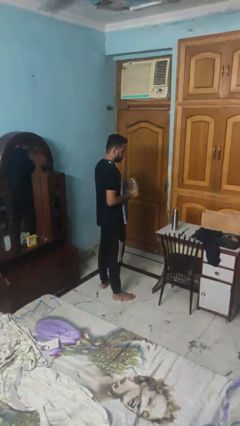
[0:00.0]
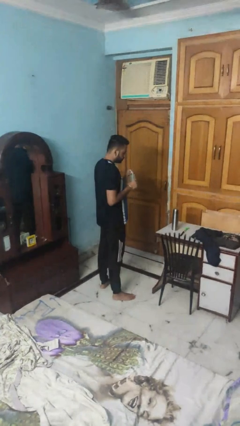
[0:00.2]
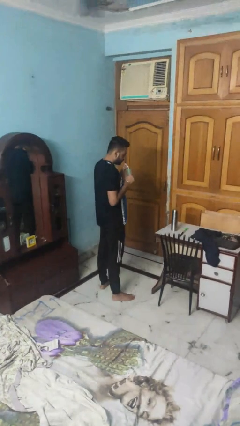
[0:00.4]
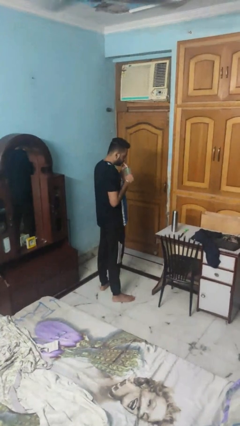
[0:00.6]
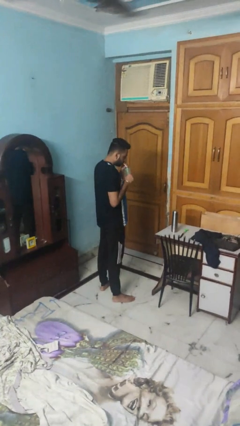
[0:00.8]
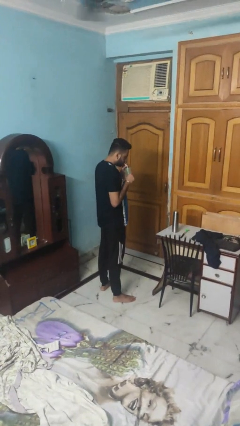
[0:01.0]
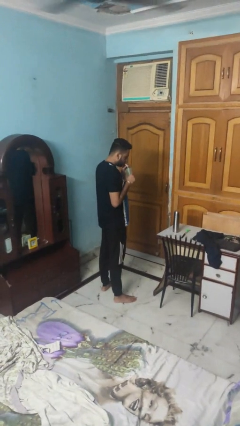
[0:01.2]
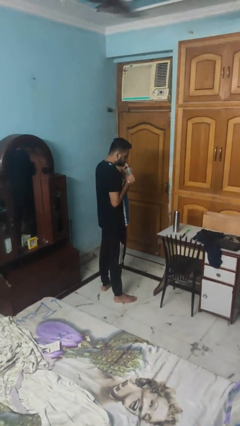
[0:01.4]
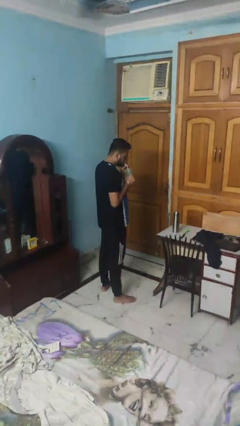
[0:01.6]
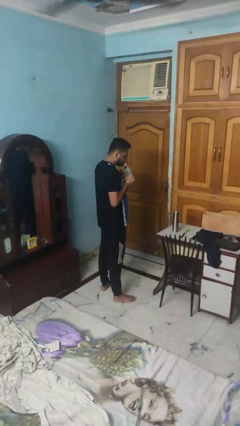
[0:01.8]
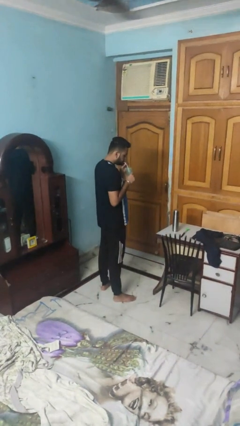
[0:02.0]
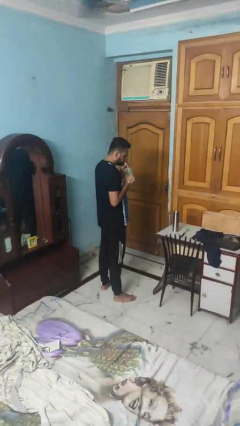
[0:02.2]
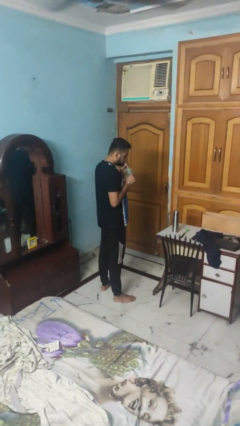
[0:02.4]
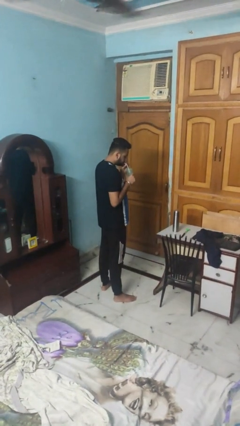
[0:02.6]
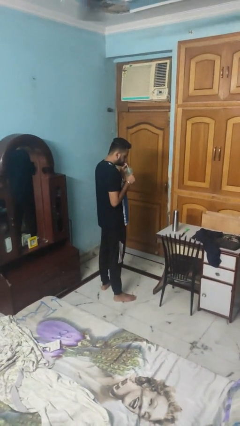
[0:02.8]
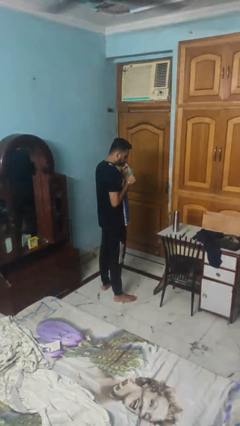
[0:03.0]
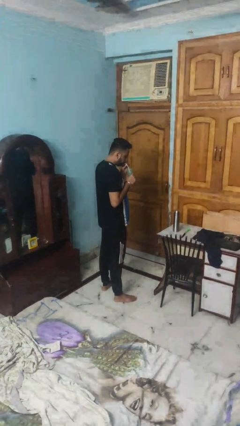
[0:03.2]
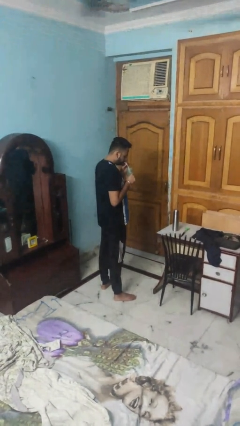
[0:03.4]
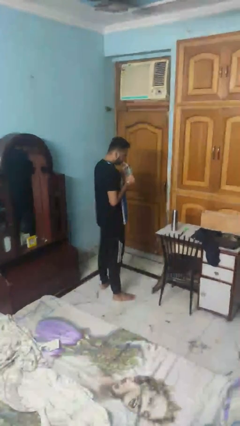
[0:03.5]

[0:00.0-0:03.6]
person drinks from straw

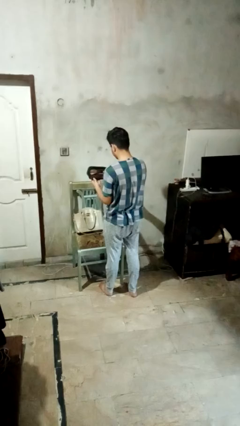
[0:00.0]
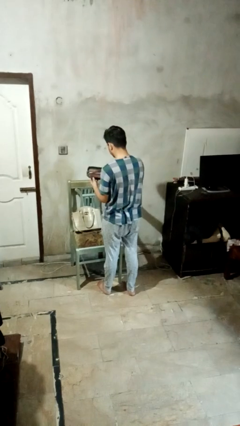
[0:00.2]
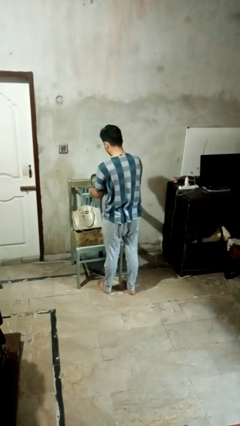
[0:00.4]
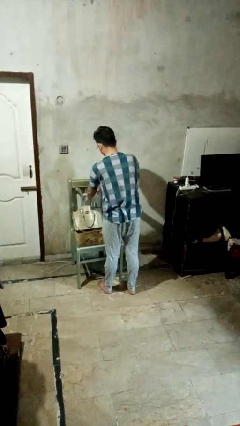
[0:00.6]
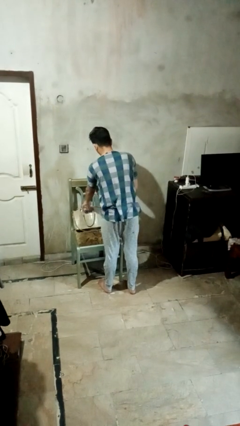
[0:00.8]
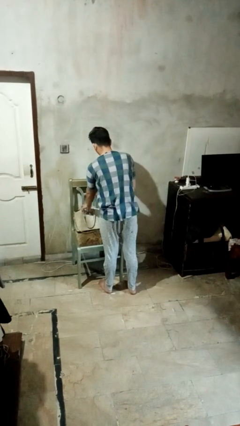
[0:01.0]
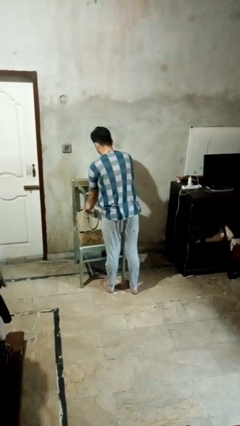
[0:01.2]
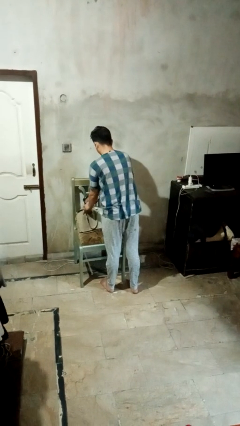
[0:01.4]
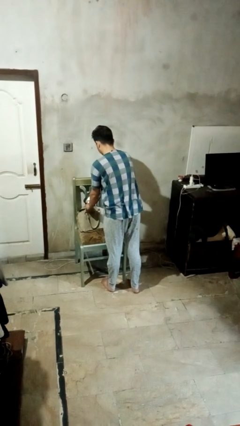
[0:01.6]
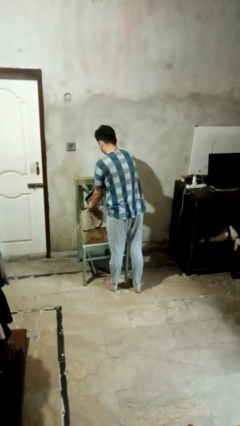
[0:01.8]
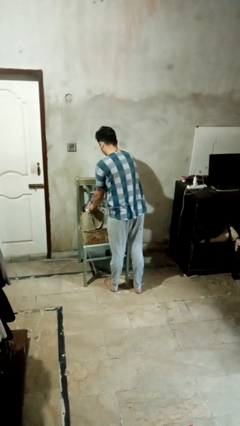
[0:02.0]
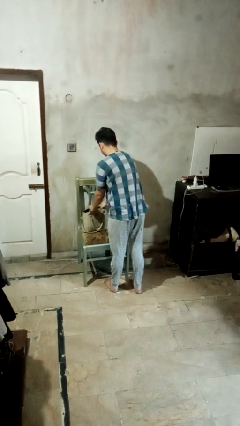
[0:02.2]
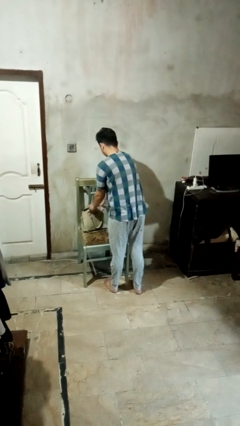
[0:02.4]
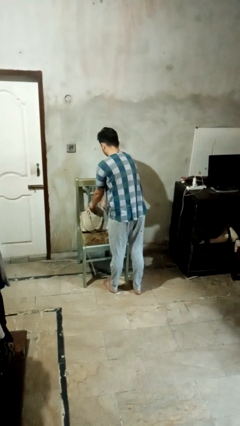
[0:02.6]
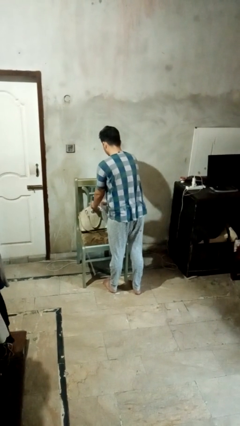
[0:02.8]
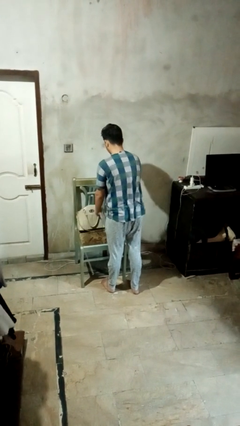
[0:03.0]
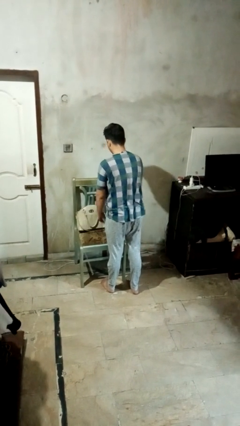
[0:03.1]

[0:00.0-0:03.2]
person puts object into purse

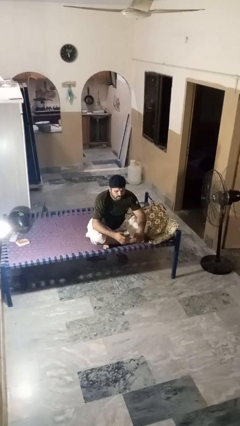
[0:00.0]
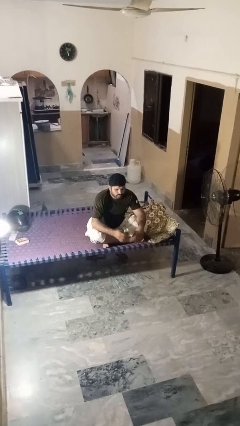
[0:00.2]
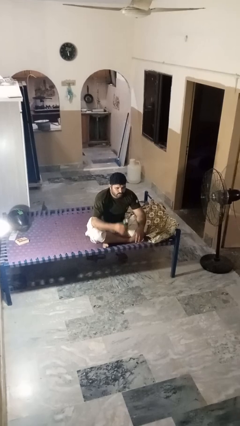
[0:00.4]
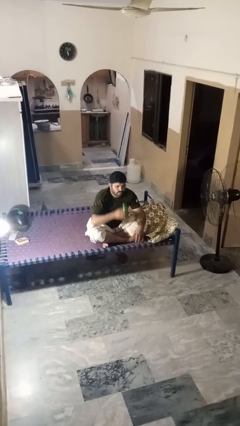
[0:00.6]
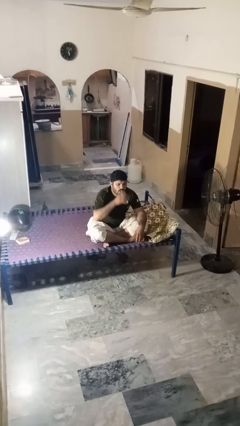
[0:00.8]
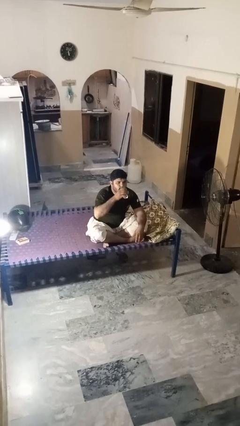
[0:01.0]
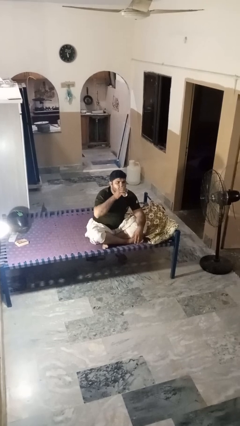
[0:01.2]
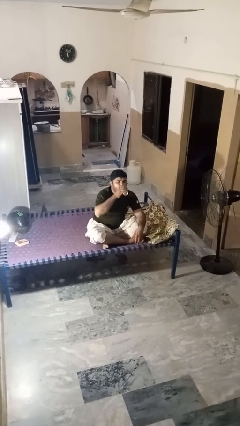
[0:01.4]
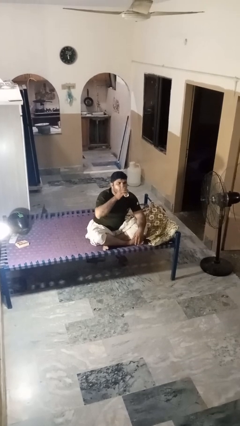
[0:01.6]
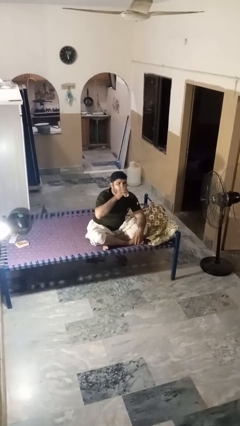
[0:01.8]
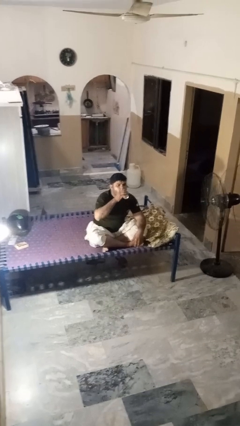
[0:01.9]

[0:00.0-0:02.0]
person drinks from beverage can

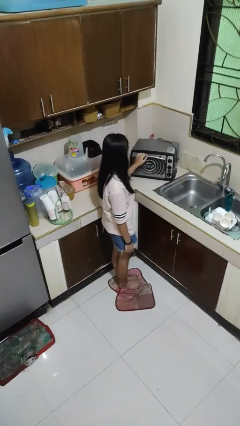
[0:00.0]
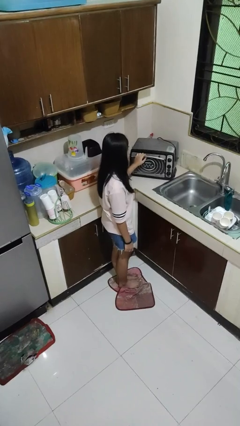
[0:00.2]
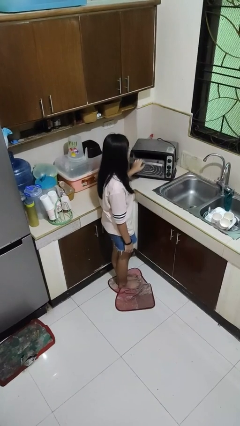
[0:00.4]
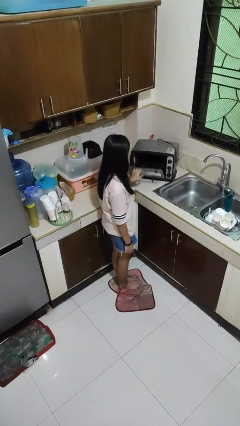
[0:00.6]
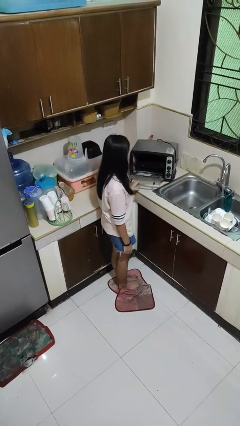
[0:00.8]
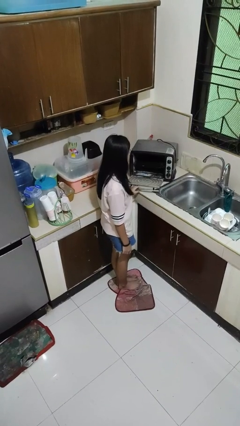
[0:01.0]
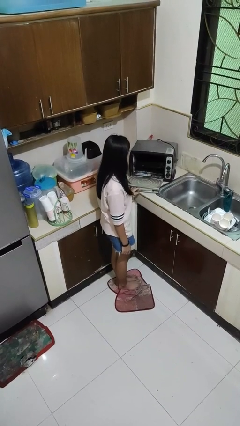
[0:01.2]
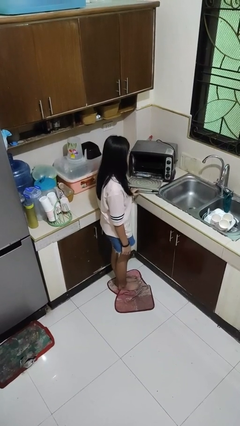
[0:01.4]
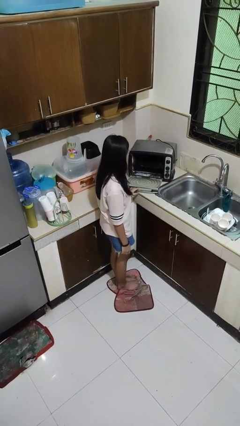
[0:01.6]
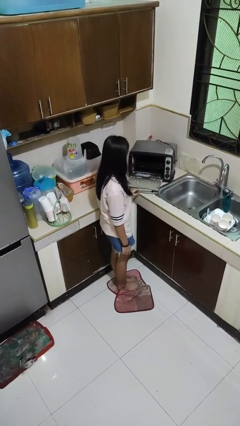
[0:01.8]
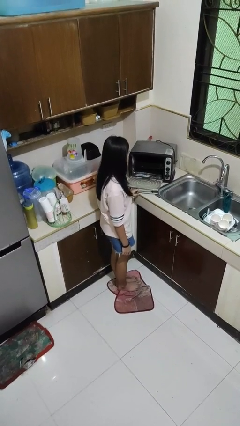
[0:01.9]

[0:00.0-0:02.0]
person opens microwave

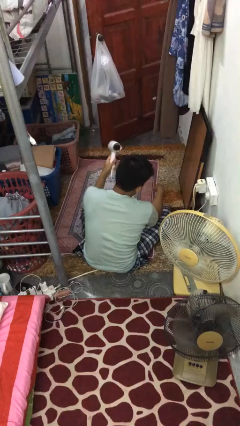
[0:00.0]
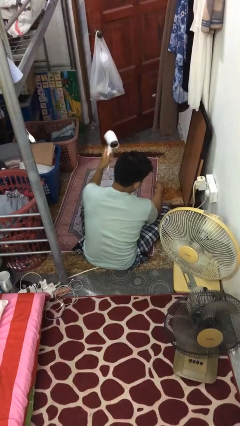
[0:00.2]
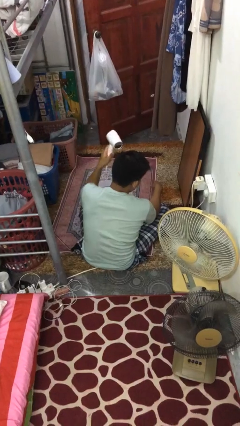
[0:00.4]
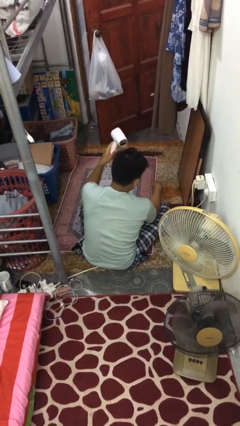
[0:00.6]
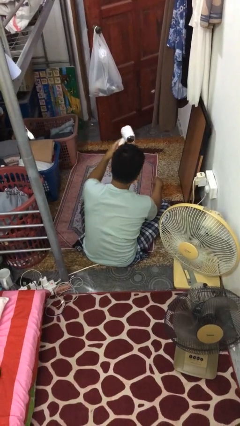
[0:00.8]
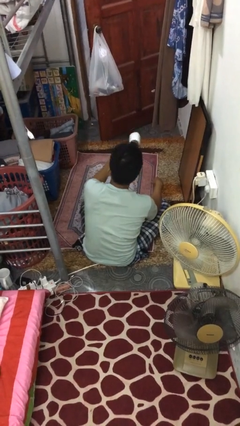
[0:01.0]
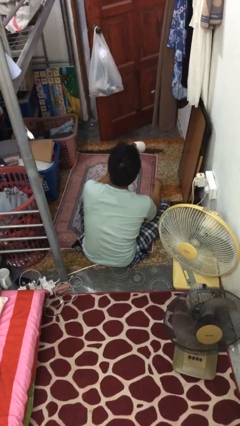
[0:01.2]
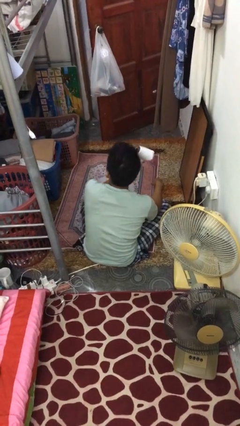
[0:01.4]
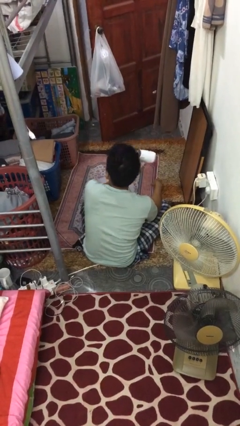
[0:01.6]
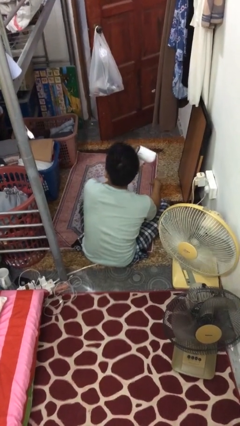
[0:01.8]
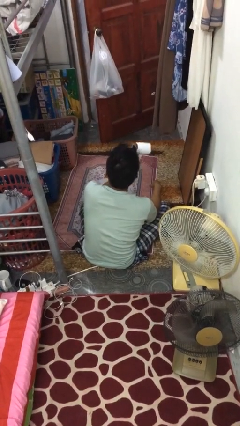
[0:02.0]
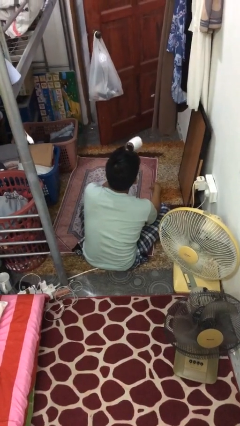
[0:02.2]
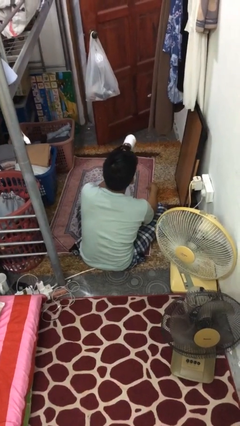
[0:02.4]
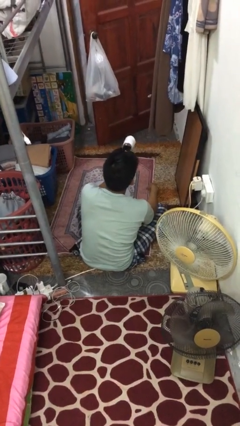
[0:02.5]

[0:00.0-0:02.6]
person dries hair with hairdryer

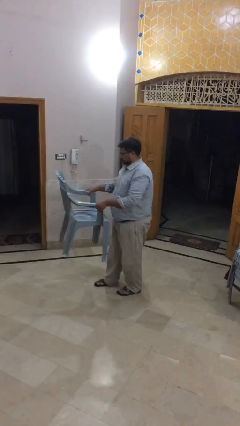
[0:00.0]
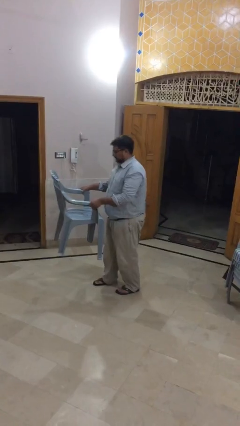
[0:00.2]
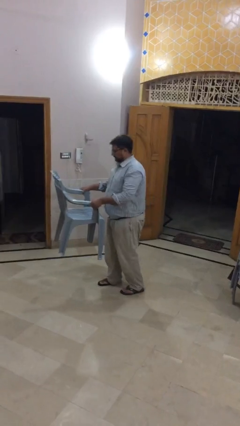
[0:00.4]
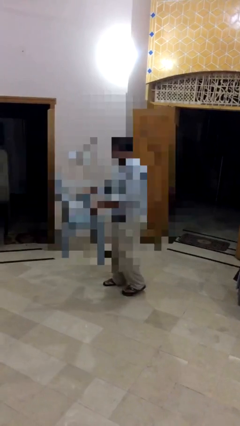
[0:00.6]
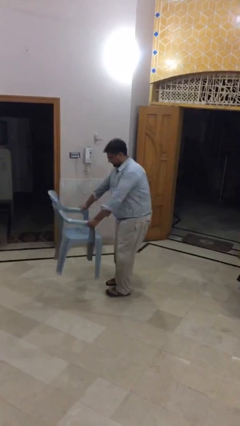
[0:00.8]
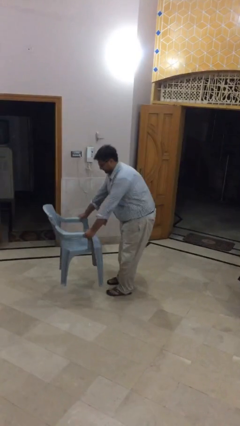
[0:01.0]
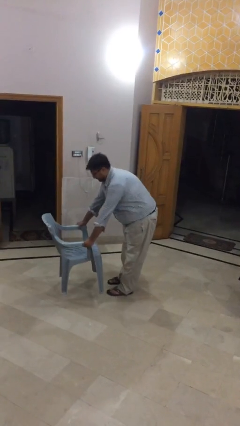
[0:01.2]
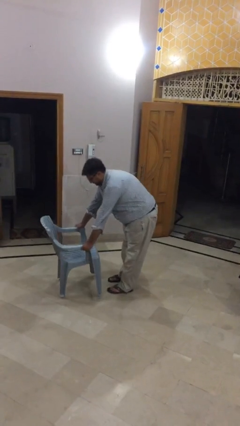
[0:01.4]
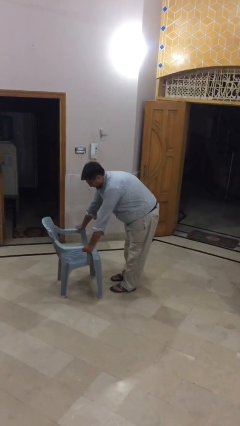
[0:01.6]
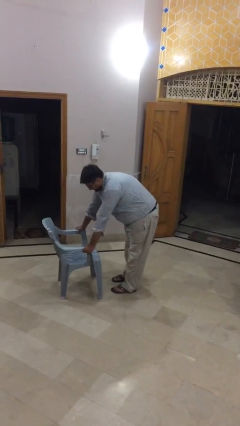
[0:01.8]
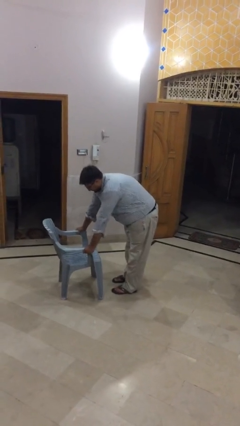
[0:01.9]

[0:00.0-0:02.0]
person puts down object on floor

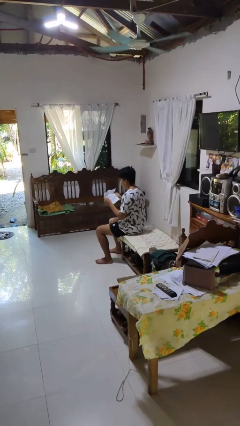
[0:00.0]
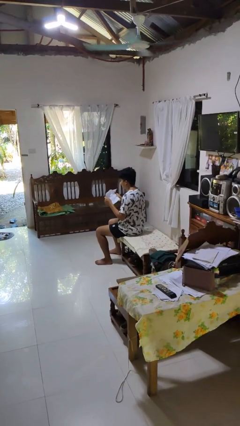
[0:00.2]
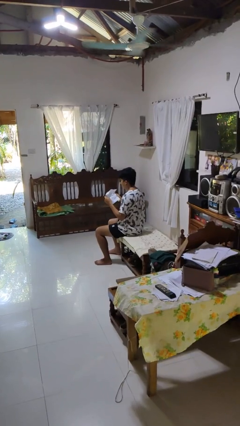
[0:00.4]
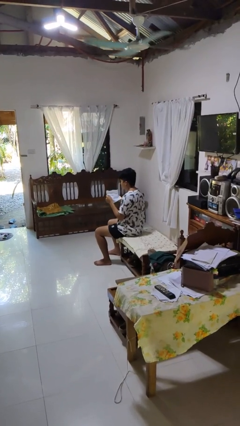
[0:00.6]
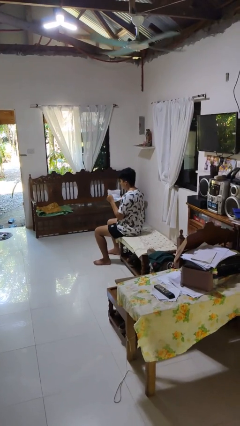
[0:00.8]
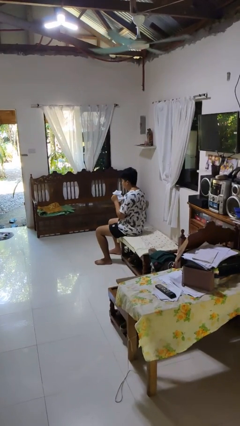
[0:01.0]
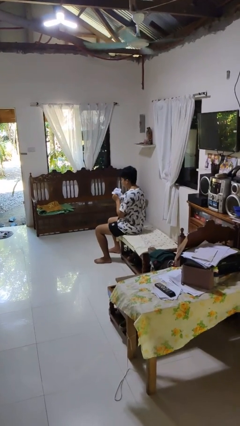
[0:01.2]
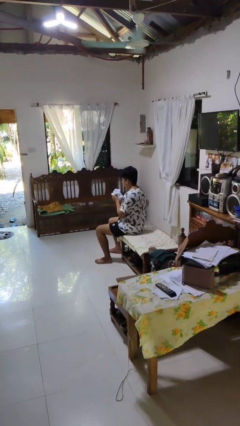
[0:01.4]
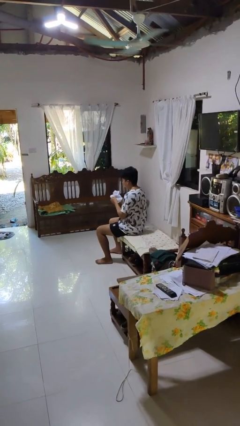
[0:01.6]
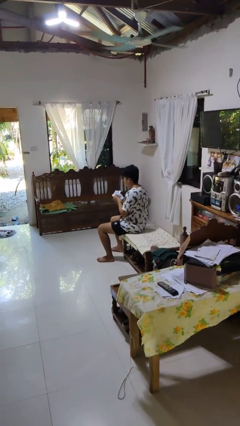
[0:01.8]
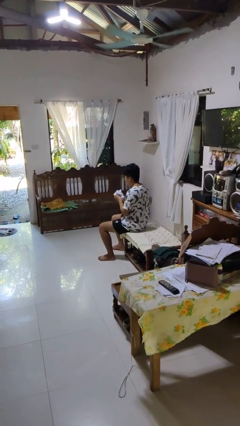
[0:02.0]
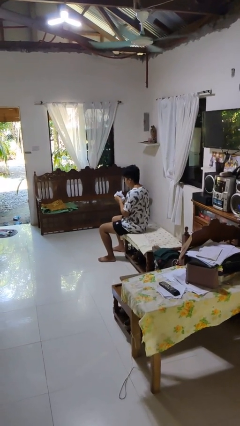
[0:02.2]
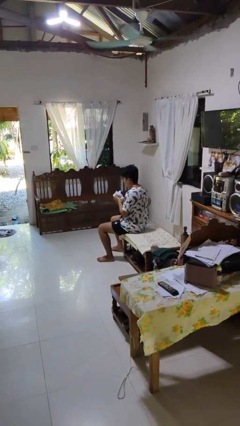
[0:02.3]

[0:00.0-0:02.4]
person crumples paper
